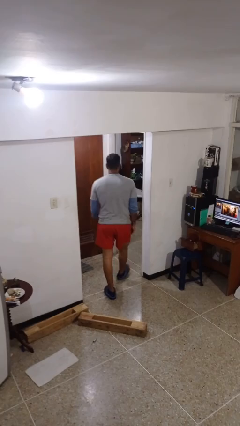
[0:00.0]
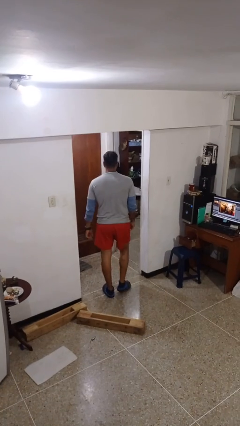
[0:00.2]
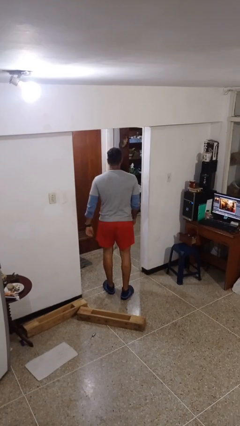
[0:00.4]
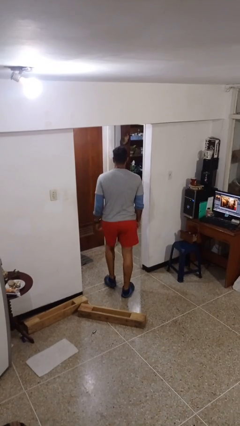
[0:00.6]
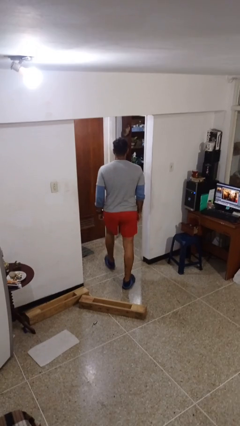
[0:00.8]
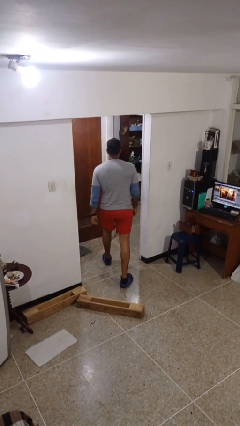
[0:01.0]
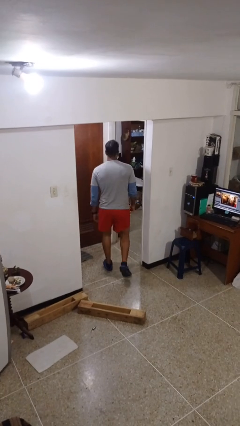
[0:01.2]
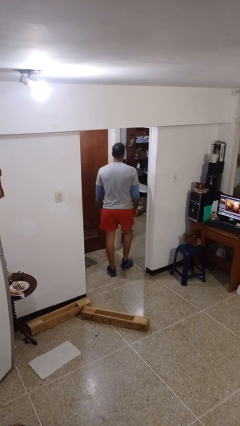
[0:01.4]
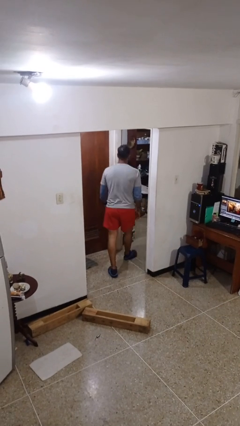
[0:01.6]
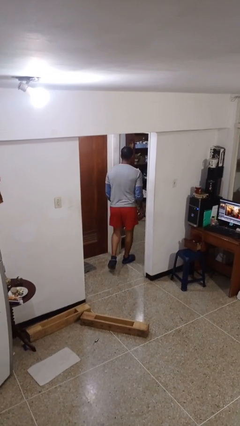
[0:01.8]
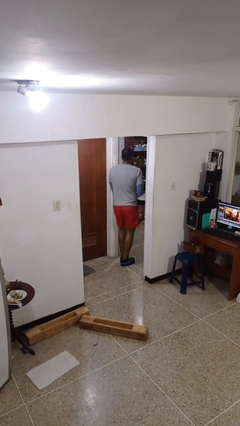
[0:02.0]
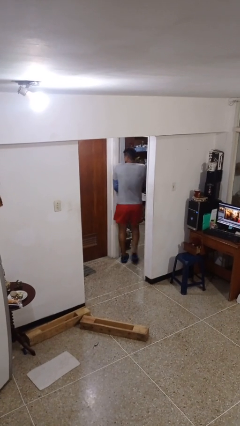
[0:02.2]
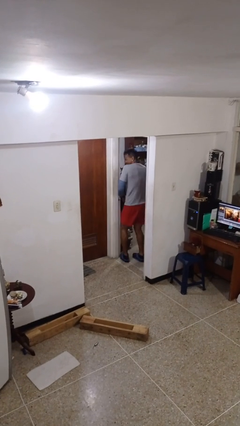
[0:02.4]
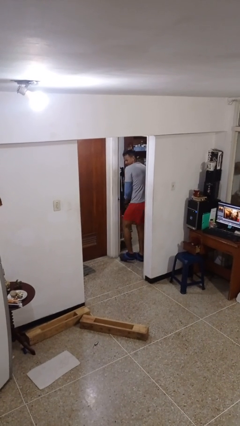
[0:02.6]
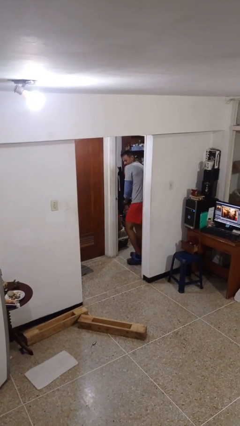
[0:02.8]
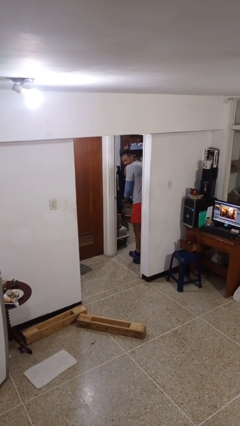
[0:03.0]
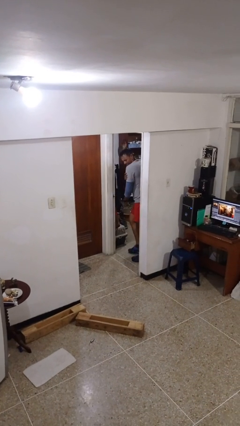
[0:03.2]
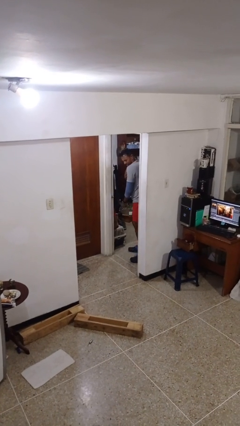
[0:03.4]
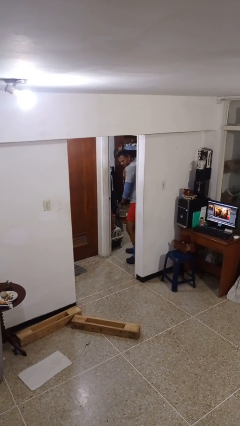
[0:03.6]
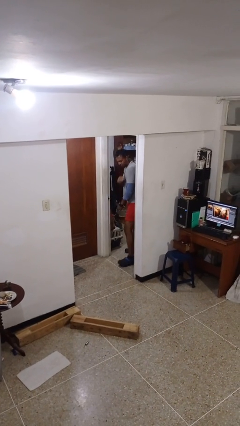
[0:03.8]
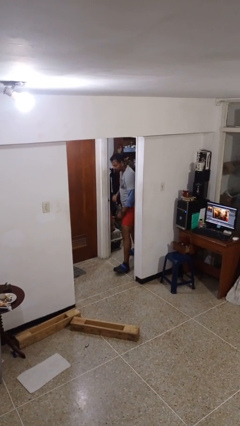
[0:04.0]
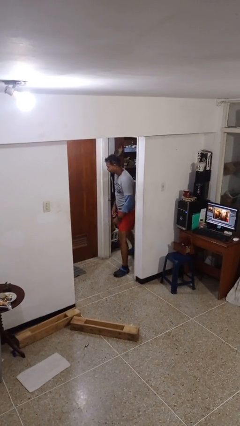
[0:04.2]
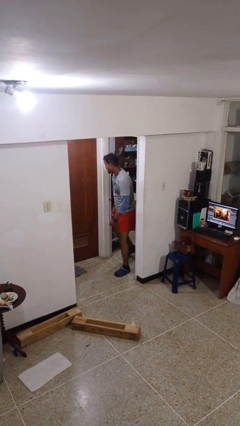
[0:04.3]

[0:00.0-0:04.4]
person bumps into wall

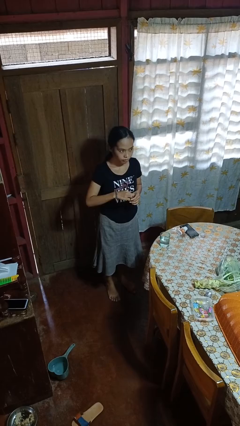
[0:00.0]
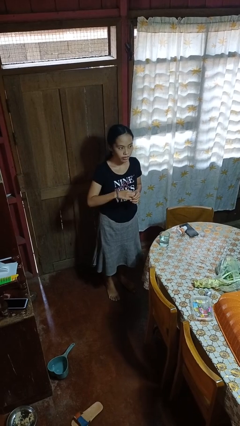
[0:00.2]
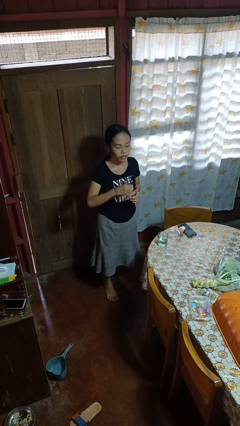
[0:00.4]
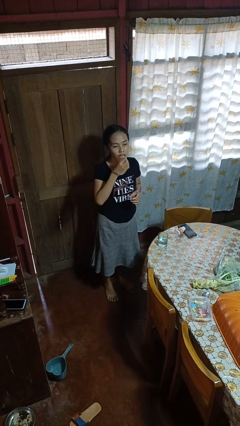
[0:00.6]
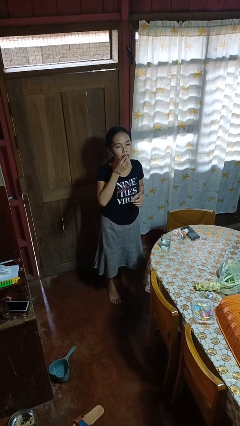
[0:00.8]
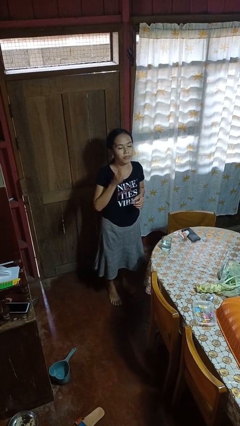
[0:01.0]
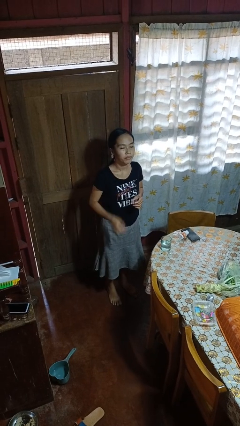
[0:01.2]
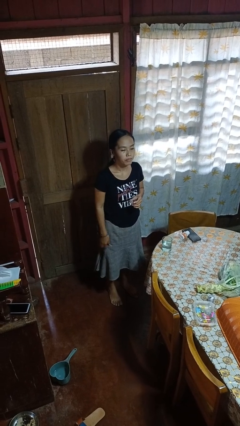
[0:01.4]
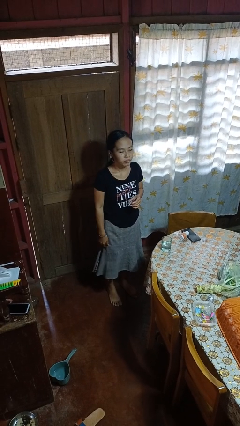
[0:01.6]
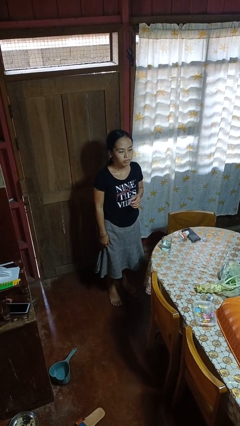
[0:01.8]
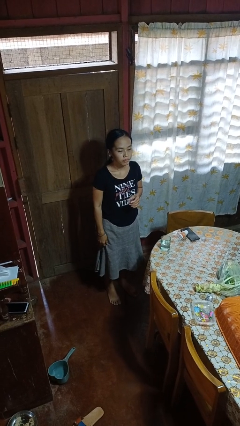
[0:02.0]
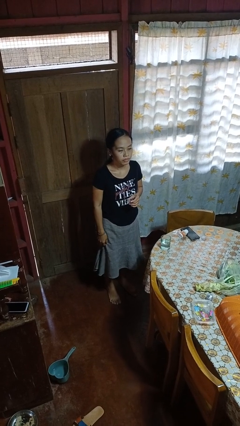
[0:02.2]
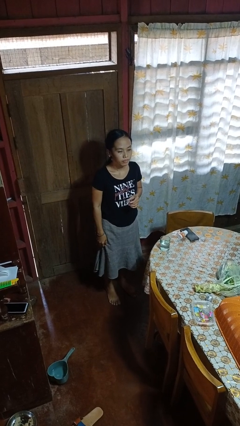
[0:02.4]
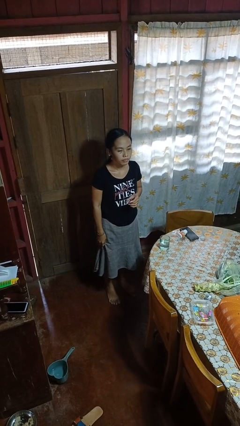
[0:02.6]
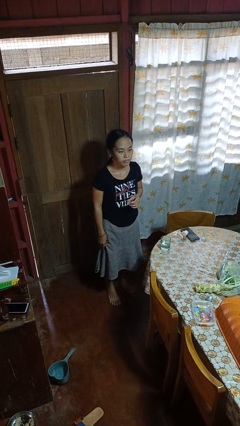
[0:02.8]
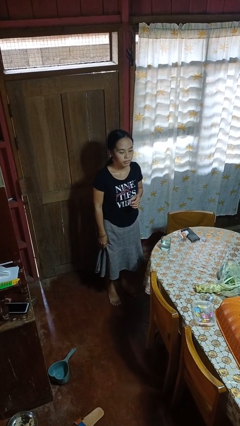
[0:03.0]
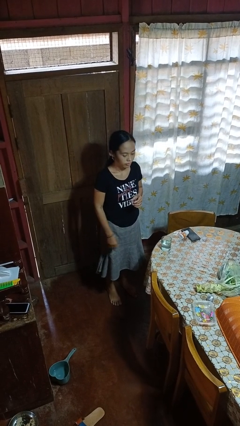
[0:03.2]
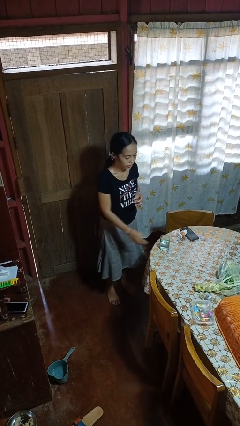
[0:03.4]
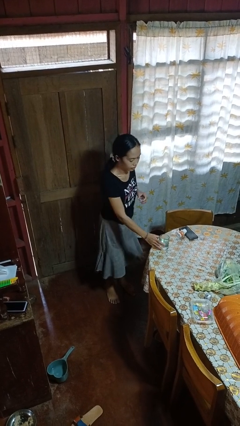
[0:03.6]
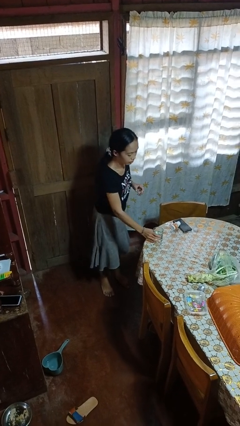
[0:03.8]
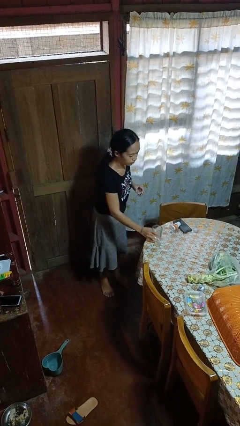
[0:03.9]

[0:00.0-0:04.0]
person takes medicine pills

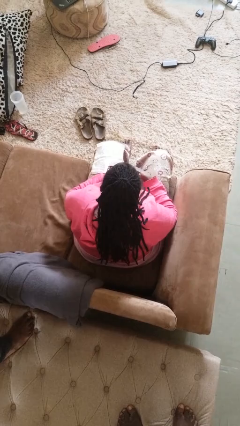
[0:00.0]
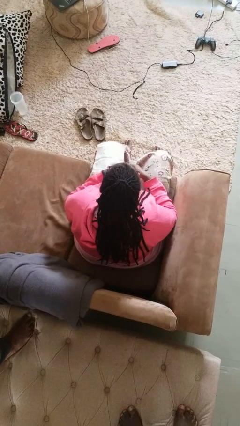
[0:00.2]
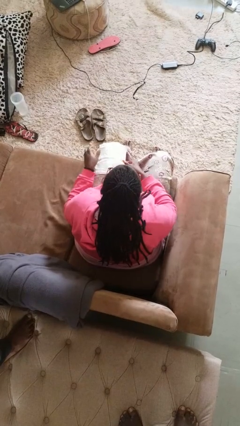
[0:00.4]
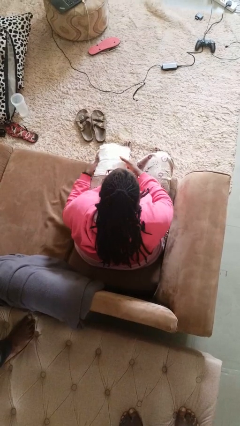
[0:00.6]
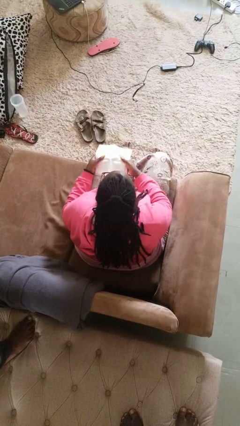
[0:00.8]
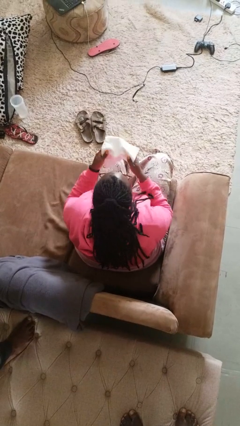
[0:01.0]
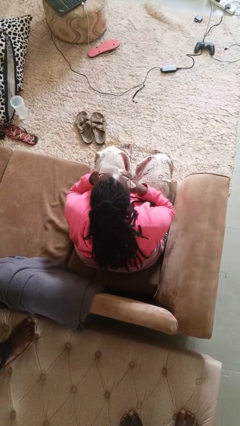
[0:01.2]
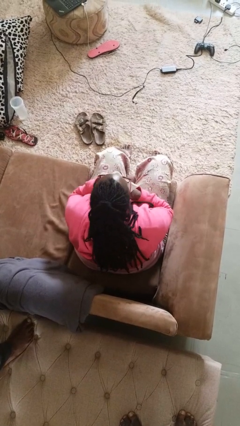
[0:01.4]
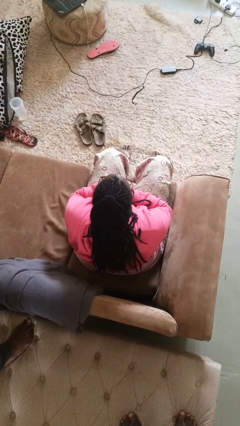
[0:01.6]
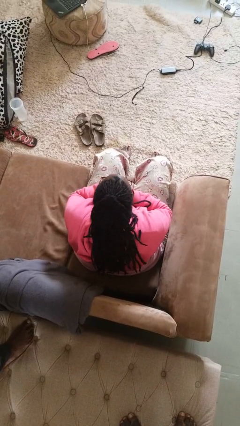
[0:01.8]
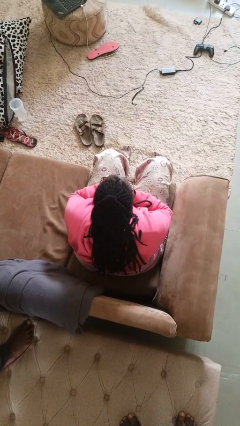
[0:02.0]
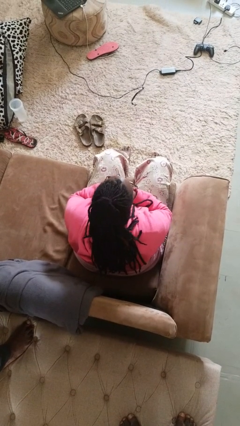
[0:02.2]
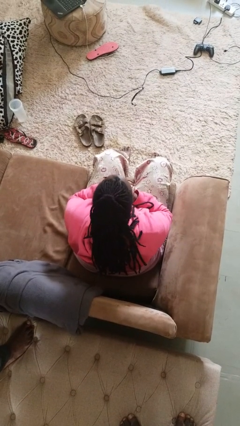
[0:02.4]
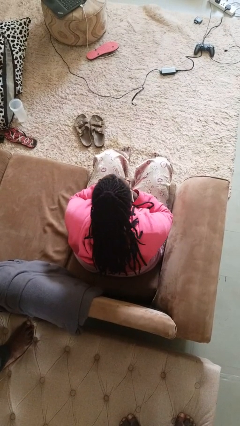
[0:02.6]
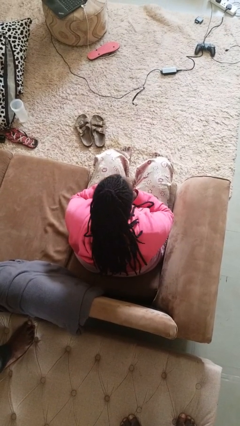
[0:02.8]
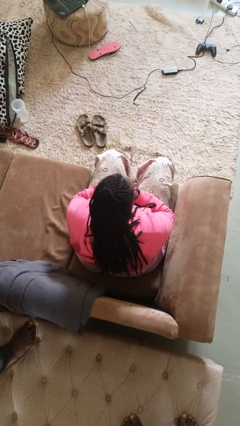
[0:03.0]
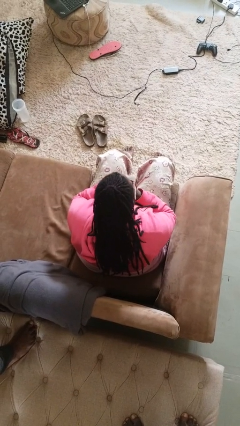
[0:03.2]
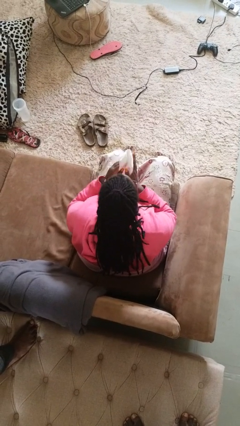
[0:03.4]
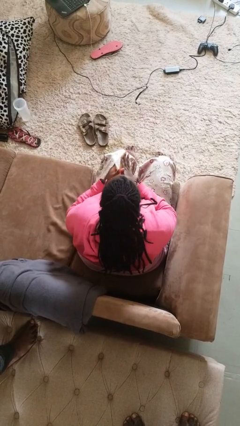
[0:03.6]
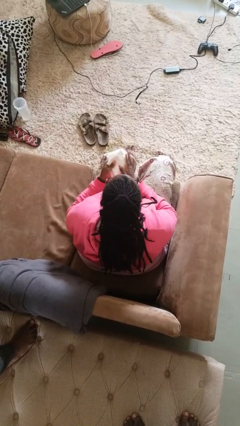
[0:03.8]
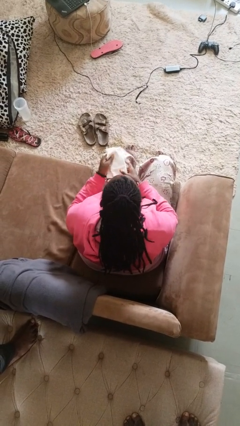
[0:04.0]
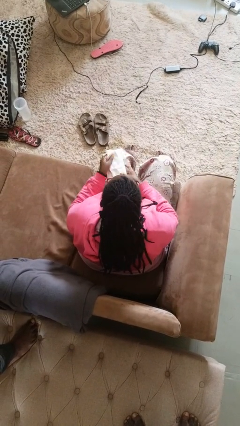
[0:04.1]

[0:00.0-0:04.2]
person blows nose

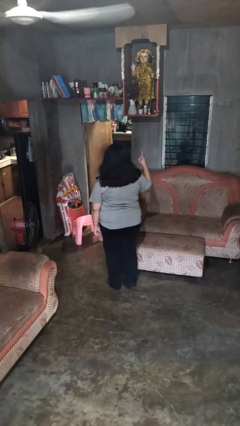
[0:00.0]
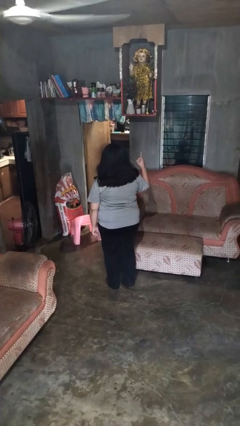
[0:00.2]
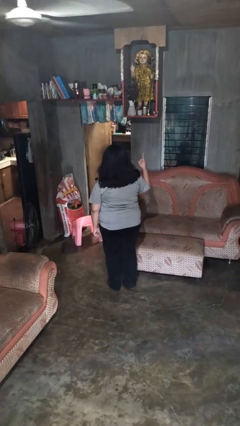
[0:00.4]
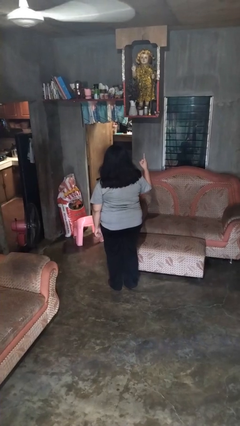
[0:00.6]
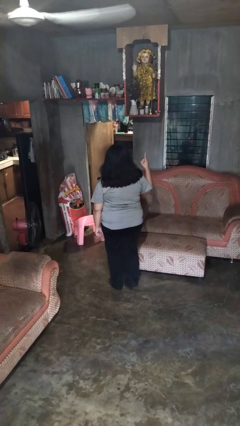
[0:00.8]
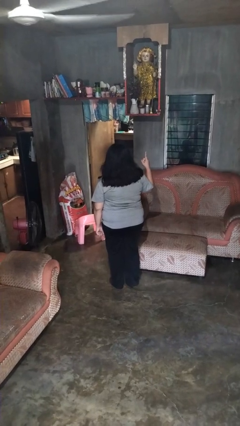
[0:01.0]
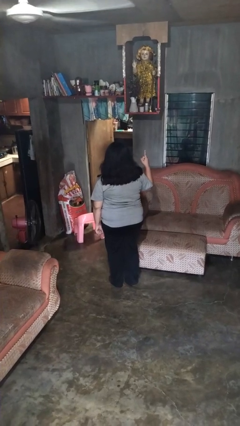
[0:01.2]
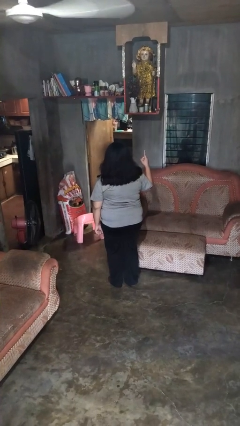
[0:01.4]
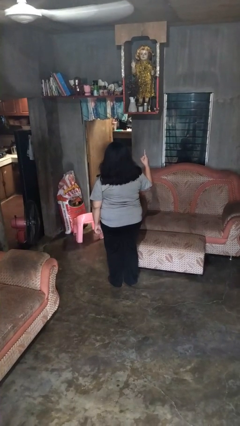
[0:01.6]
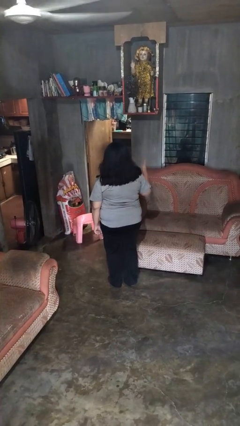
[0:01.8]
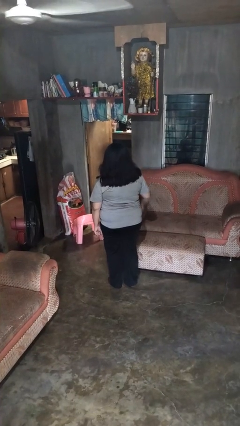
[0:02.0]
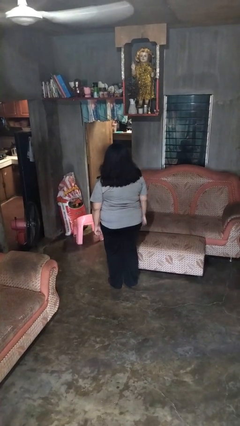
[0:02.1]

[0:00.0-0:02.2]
person gestures number one

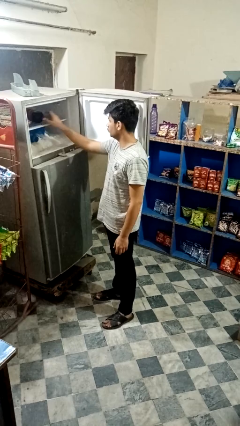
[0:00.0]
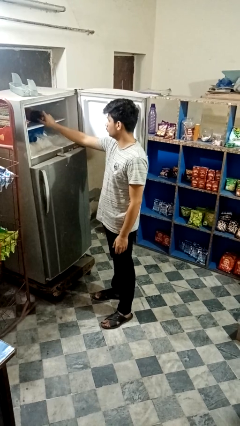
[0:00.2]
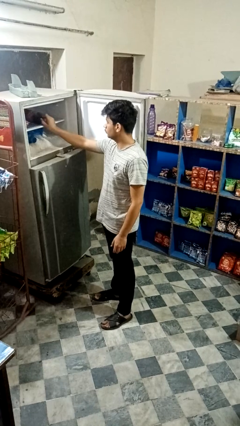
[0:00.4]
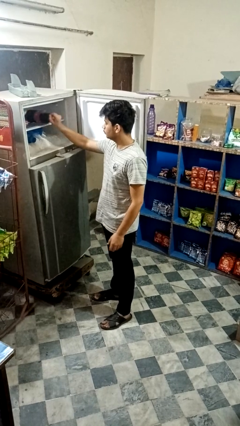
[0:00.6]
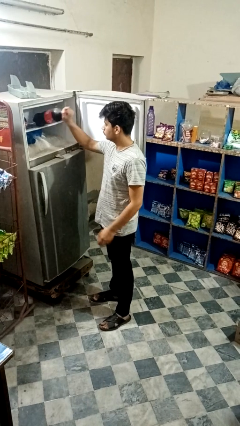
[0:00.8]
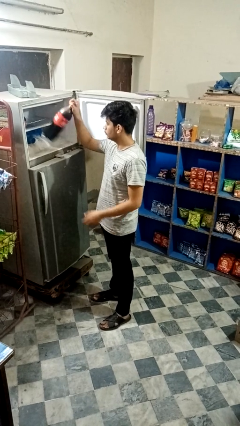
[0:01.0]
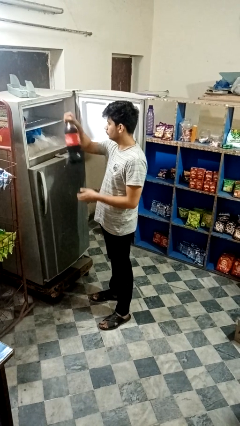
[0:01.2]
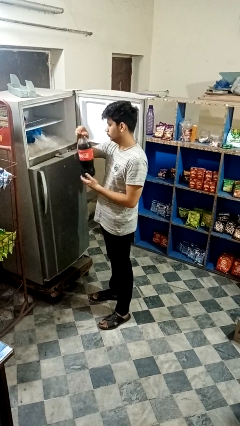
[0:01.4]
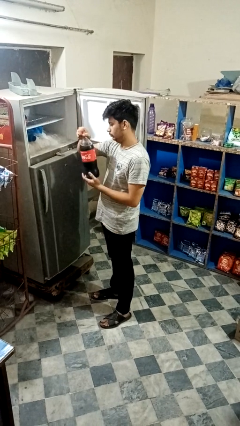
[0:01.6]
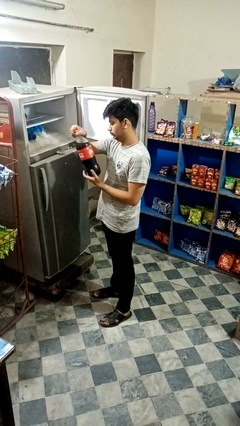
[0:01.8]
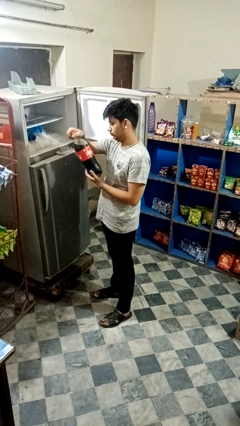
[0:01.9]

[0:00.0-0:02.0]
person takes object from refrigerator
